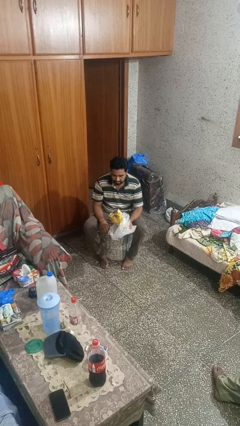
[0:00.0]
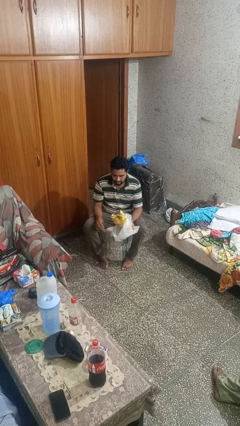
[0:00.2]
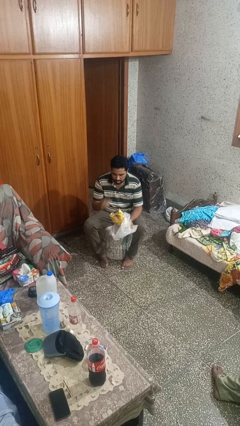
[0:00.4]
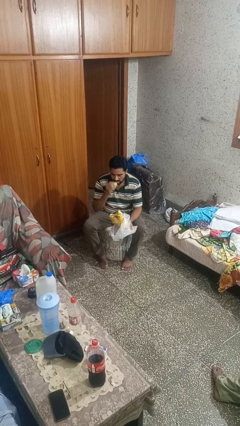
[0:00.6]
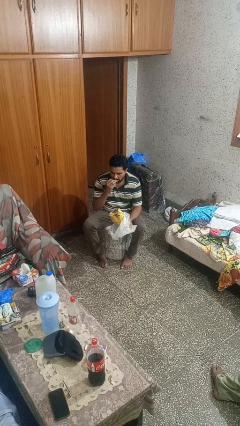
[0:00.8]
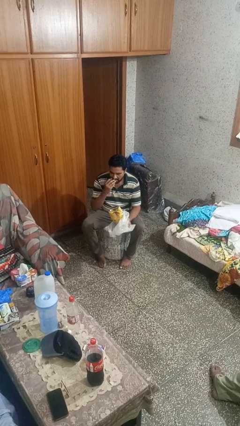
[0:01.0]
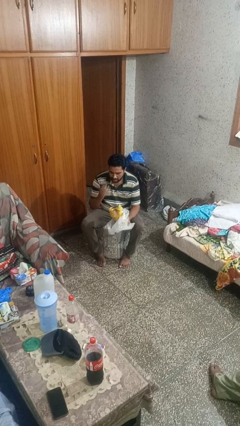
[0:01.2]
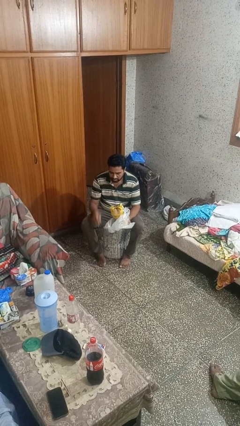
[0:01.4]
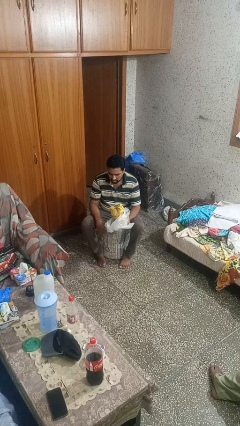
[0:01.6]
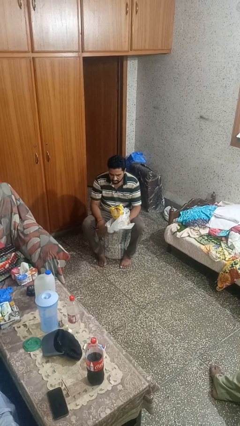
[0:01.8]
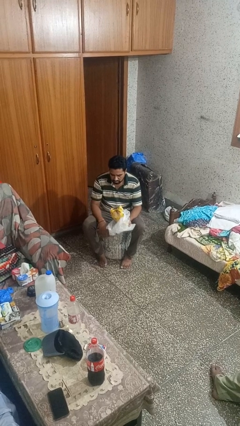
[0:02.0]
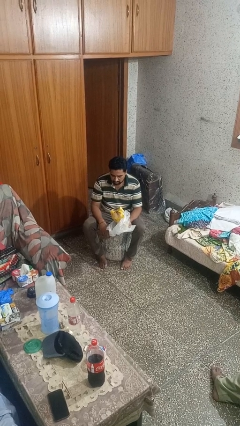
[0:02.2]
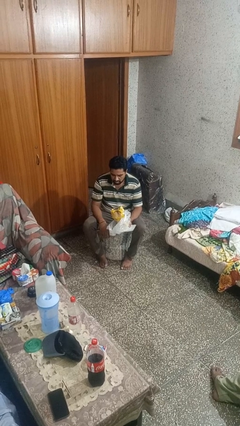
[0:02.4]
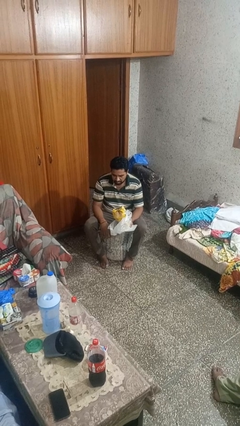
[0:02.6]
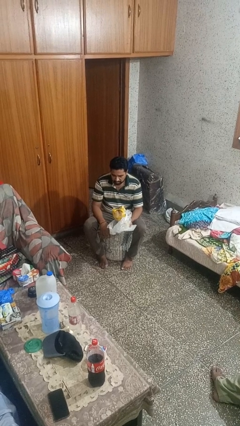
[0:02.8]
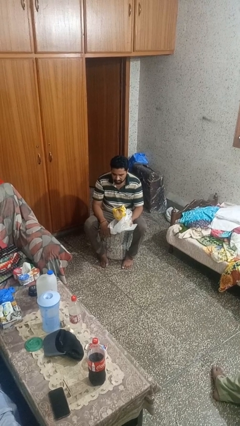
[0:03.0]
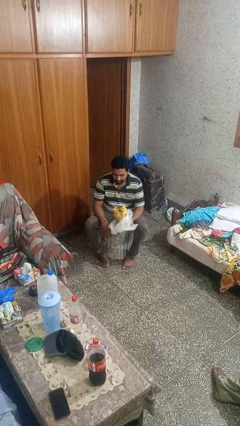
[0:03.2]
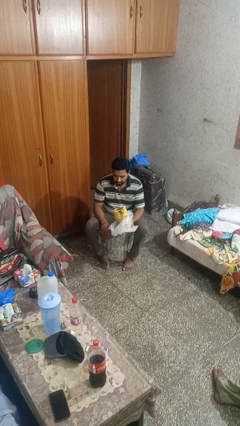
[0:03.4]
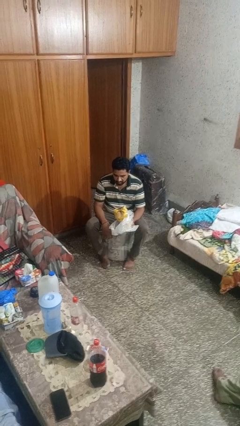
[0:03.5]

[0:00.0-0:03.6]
person eats snack from bag

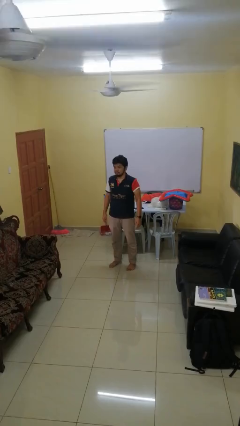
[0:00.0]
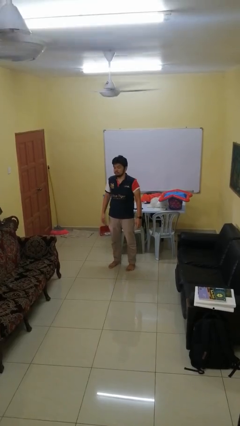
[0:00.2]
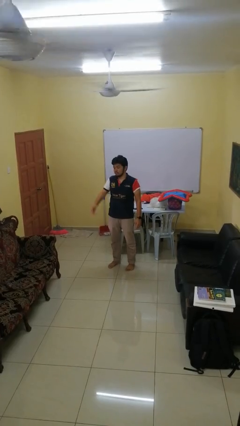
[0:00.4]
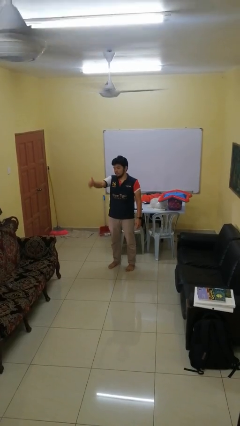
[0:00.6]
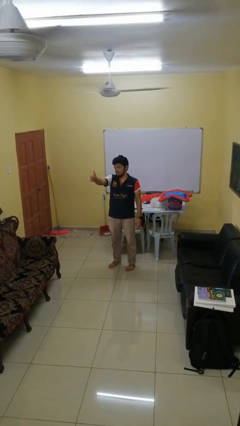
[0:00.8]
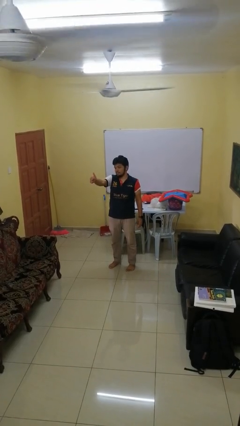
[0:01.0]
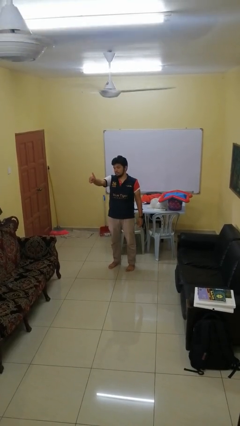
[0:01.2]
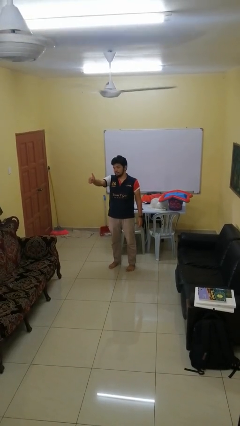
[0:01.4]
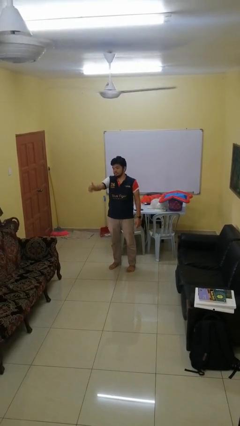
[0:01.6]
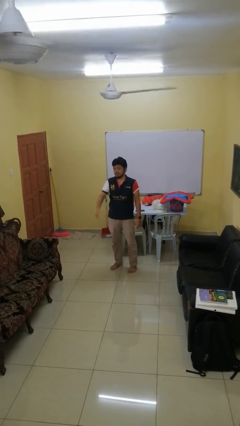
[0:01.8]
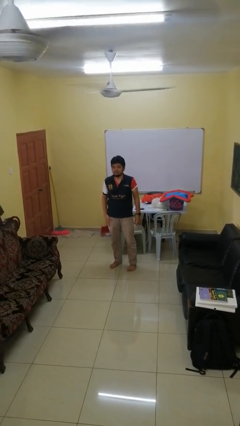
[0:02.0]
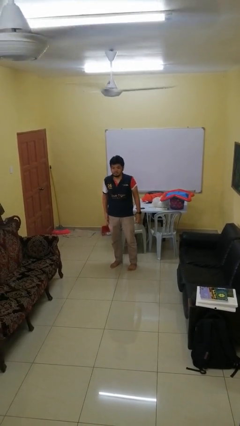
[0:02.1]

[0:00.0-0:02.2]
person gestures thumbs up

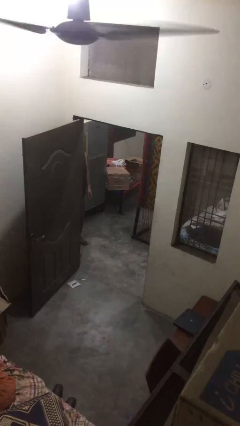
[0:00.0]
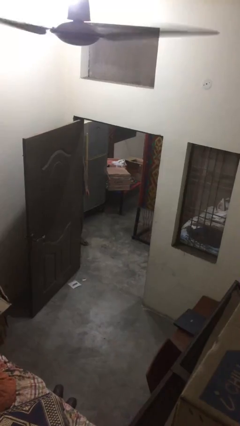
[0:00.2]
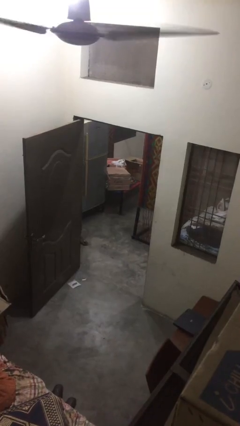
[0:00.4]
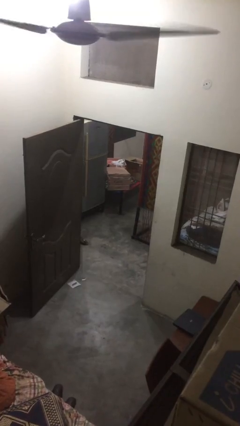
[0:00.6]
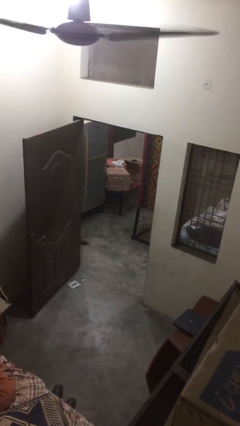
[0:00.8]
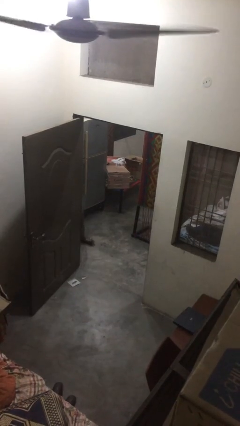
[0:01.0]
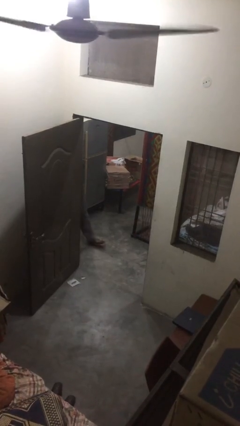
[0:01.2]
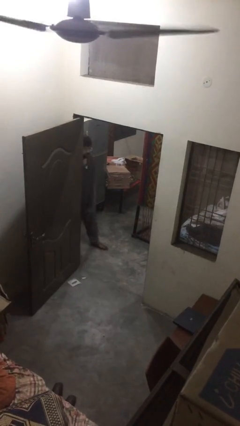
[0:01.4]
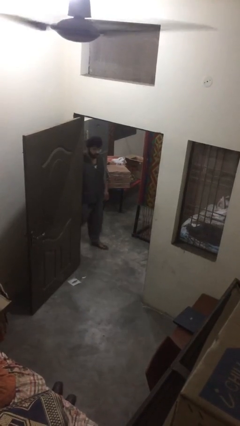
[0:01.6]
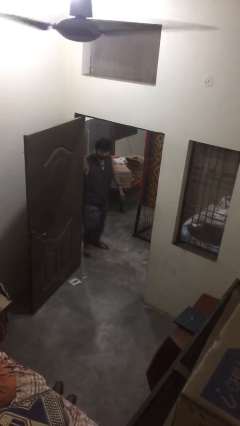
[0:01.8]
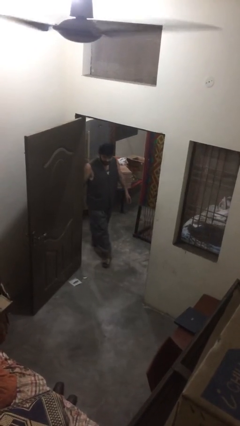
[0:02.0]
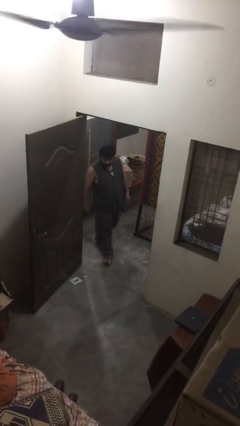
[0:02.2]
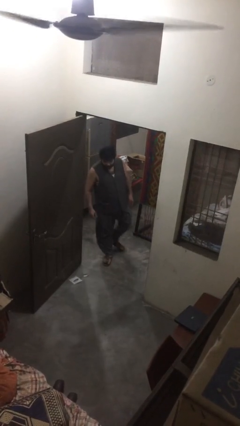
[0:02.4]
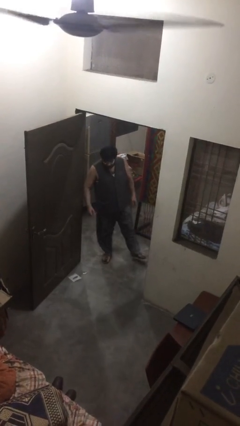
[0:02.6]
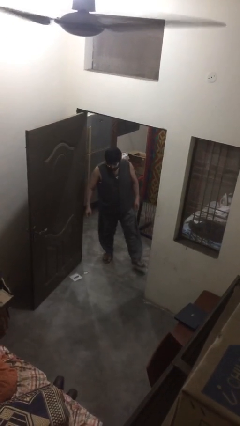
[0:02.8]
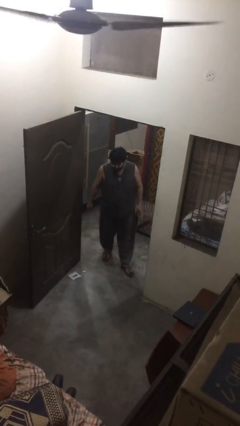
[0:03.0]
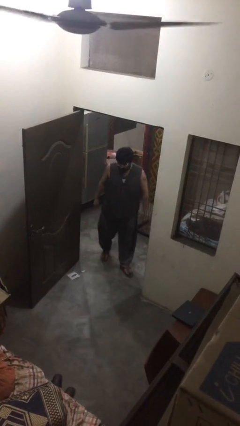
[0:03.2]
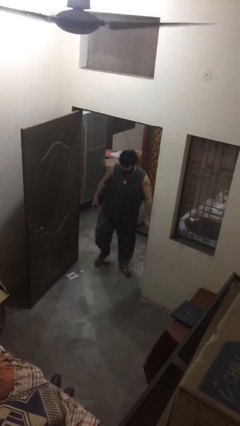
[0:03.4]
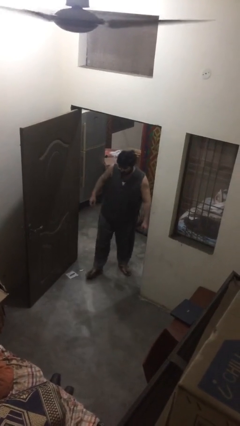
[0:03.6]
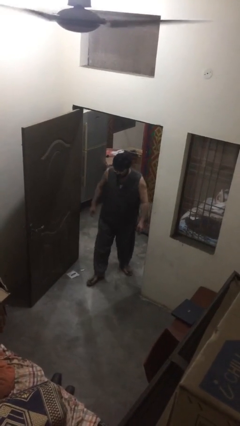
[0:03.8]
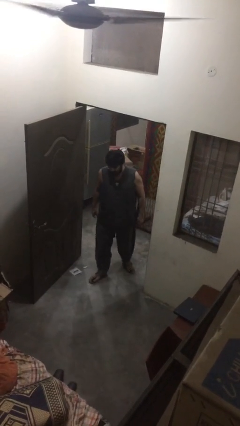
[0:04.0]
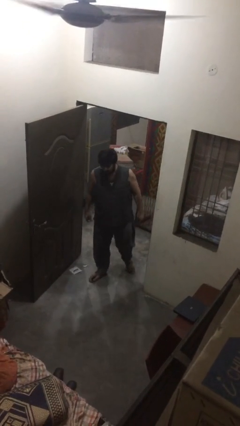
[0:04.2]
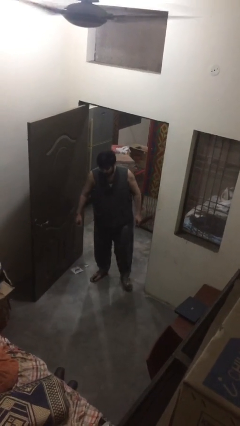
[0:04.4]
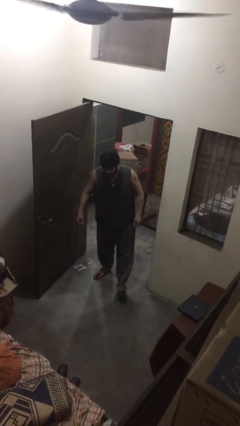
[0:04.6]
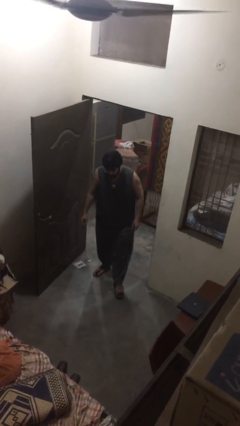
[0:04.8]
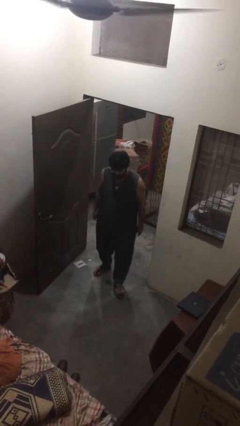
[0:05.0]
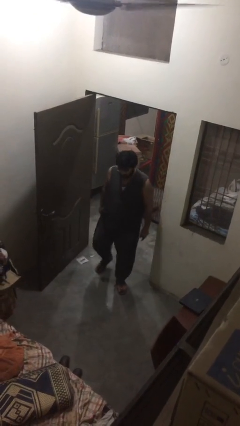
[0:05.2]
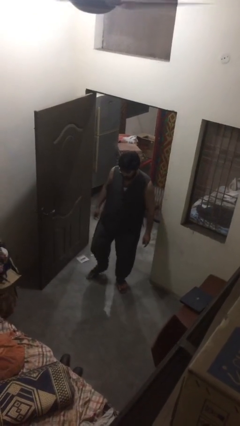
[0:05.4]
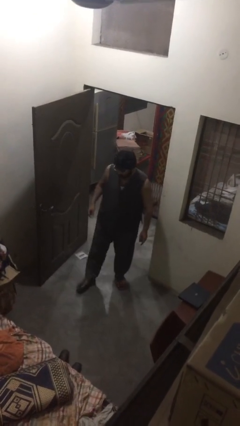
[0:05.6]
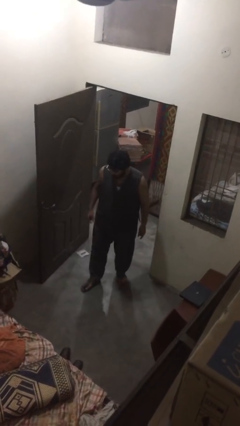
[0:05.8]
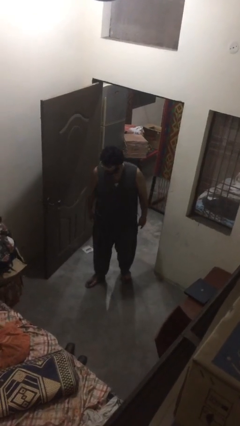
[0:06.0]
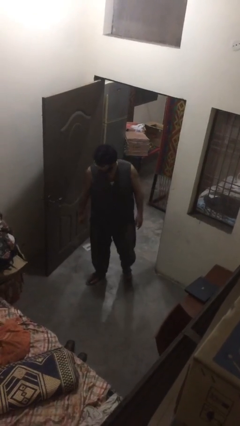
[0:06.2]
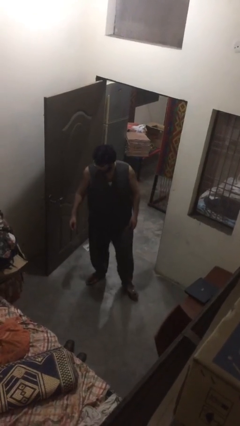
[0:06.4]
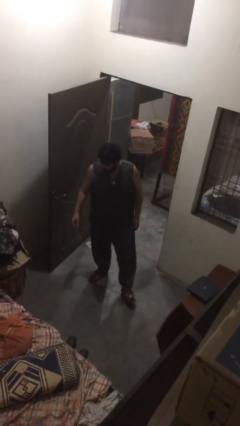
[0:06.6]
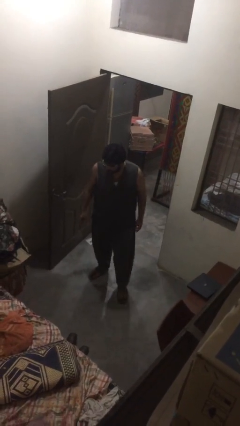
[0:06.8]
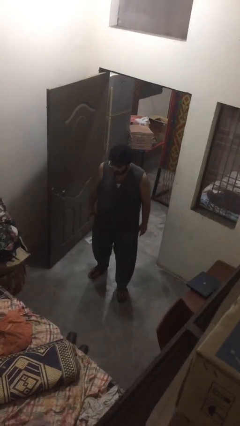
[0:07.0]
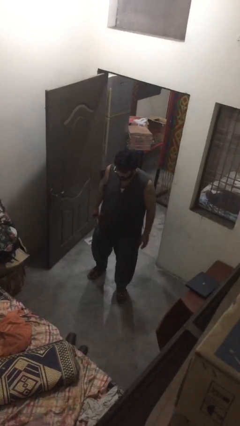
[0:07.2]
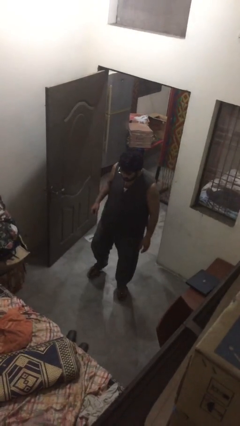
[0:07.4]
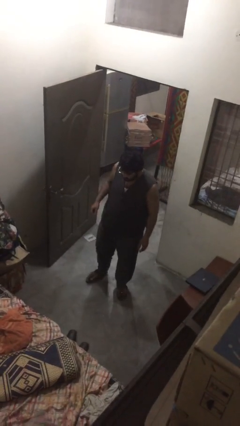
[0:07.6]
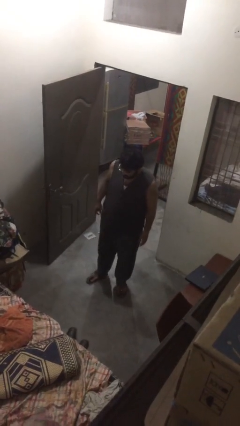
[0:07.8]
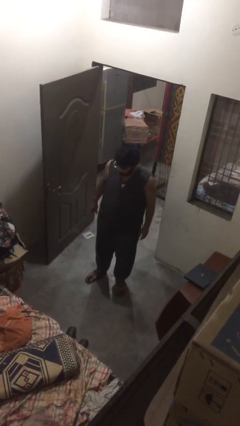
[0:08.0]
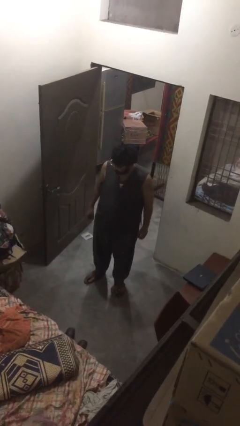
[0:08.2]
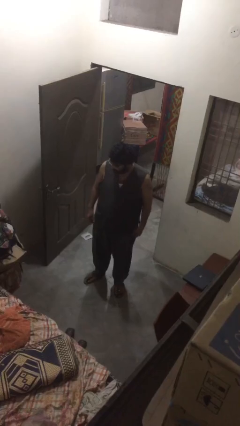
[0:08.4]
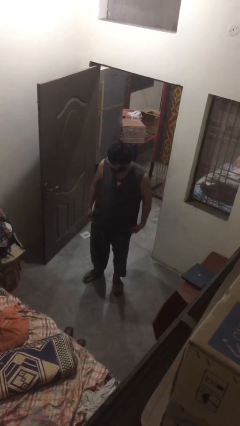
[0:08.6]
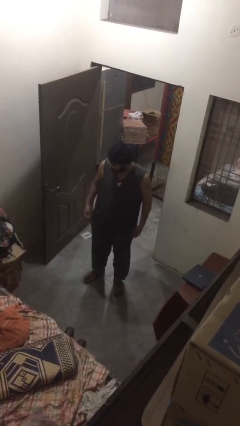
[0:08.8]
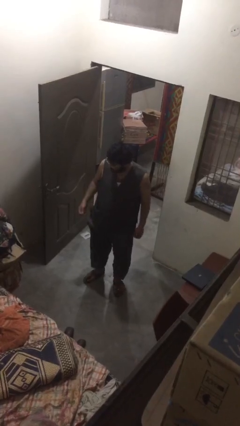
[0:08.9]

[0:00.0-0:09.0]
person enters scene through structure

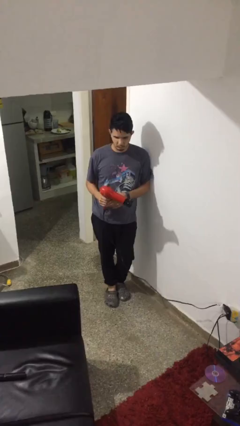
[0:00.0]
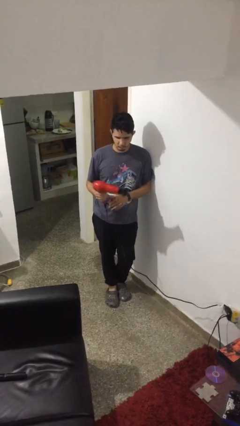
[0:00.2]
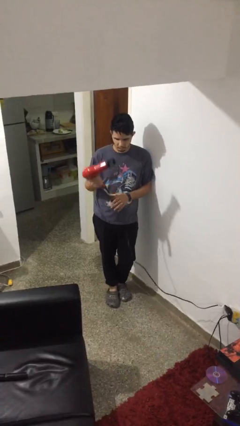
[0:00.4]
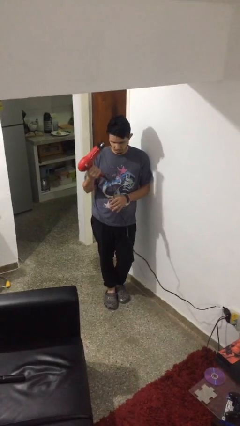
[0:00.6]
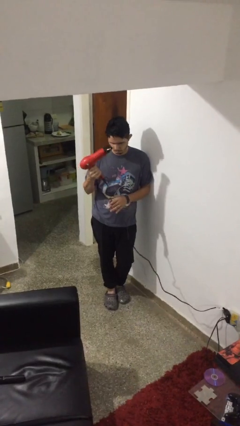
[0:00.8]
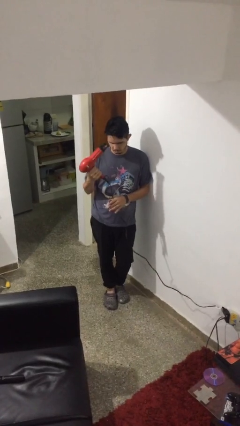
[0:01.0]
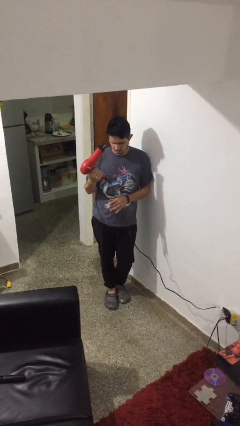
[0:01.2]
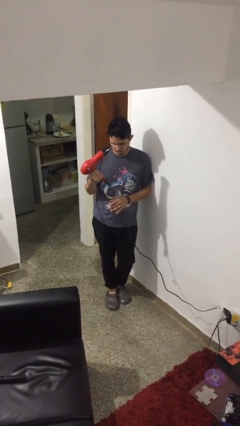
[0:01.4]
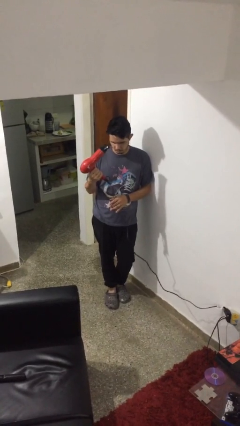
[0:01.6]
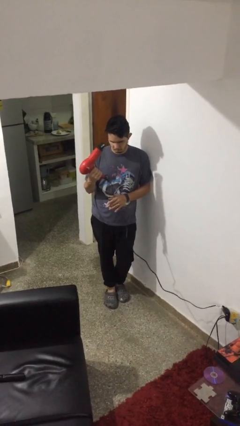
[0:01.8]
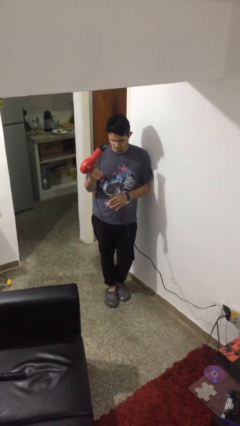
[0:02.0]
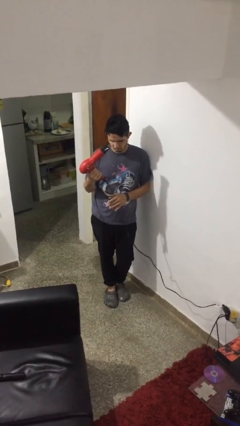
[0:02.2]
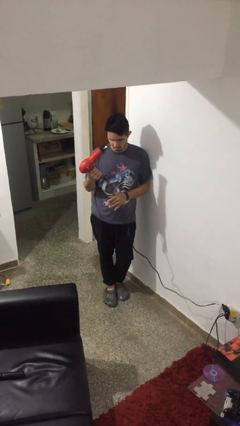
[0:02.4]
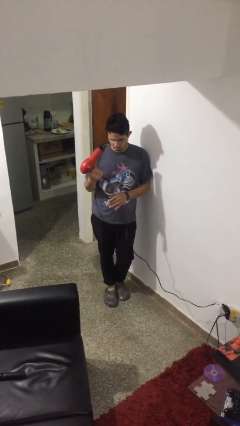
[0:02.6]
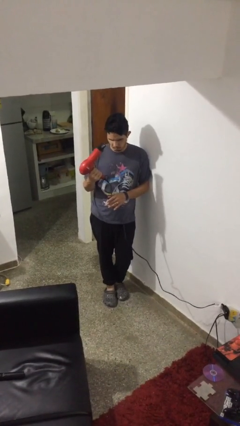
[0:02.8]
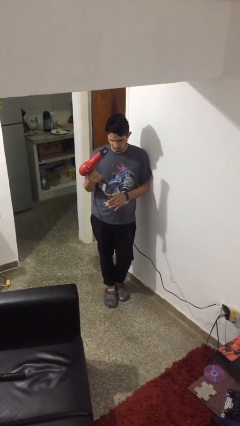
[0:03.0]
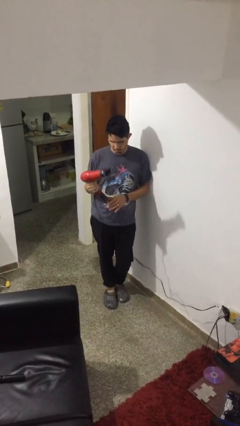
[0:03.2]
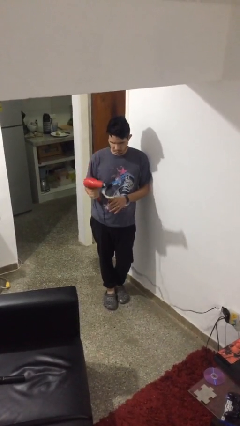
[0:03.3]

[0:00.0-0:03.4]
person dries hair with hairdryer
